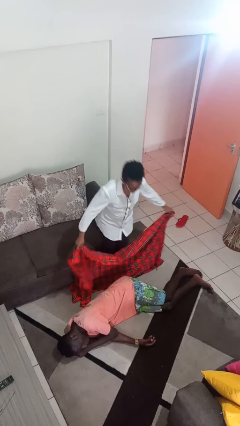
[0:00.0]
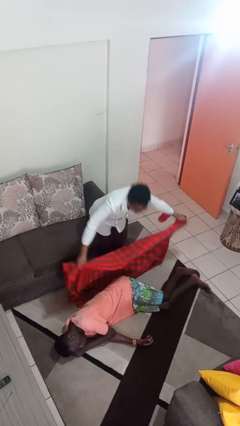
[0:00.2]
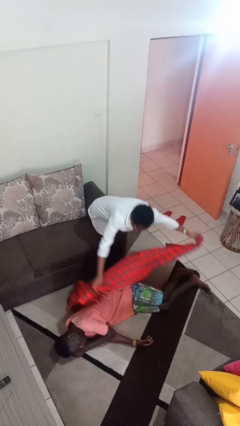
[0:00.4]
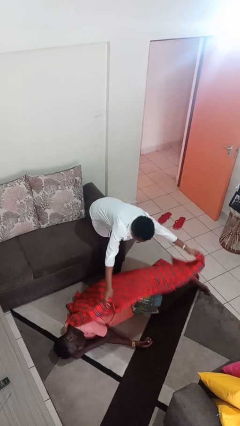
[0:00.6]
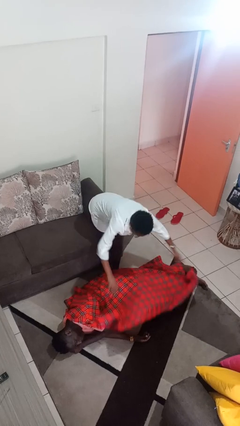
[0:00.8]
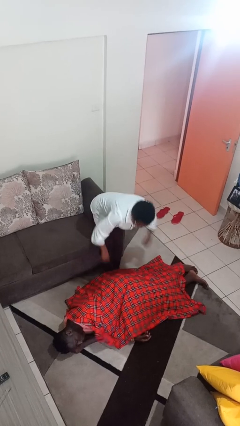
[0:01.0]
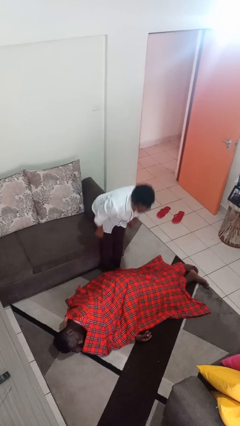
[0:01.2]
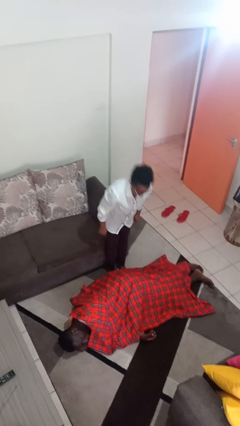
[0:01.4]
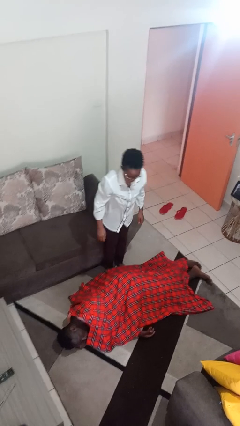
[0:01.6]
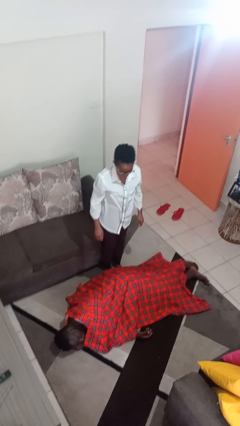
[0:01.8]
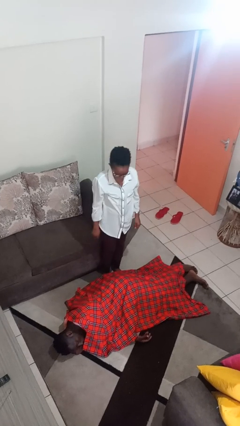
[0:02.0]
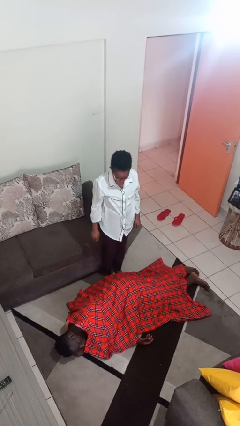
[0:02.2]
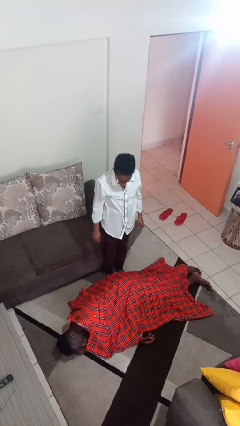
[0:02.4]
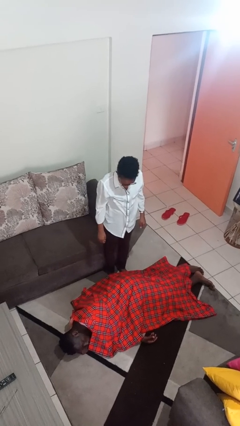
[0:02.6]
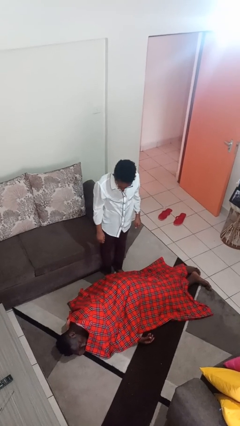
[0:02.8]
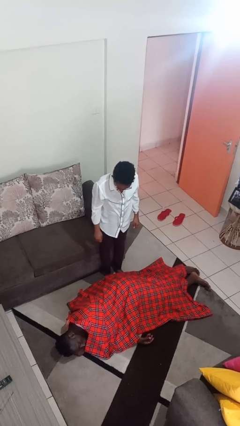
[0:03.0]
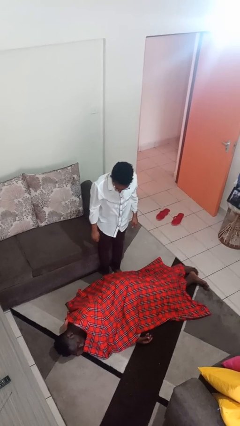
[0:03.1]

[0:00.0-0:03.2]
person covers friend with blanket

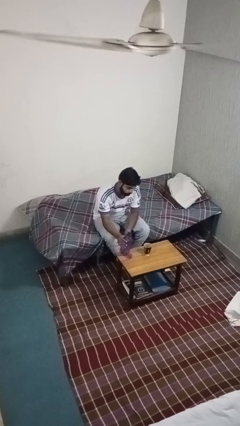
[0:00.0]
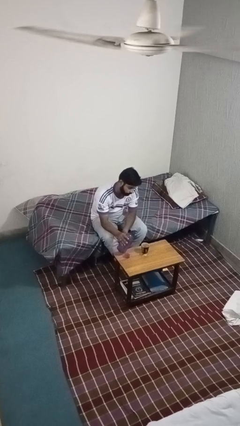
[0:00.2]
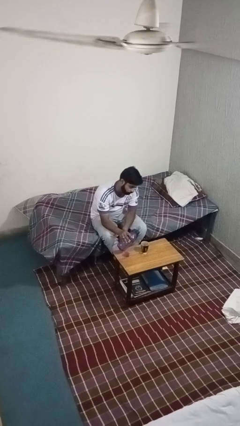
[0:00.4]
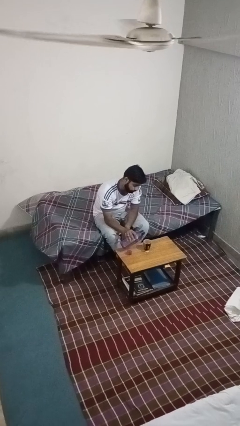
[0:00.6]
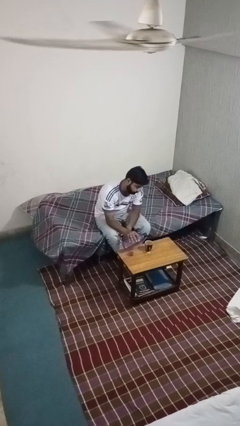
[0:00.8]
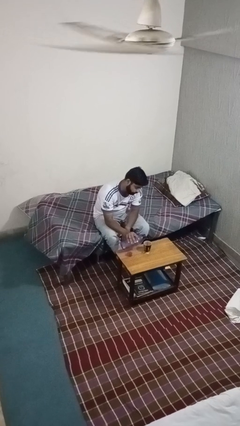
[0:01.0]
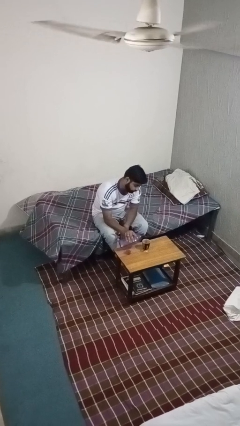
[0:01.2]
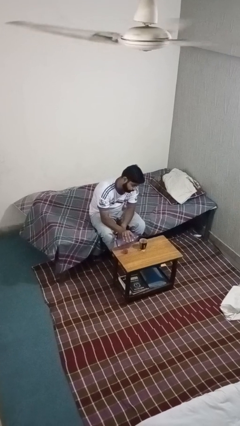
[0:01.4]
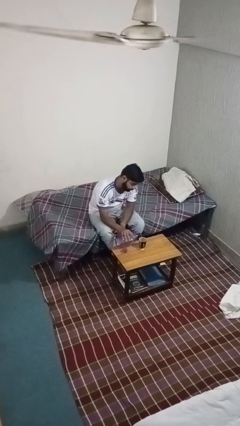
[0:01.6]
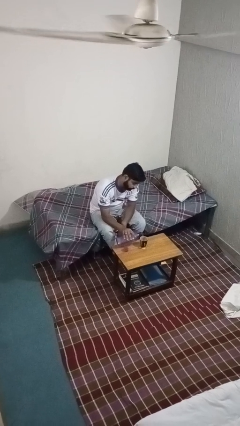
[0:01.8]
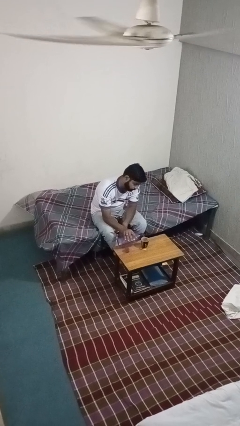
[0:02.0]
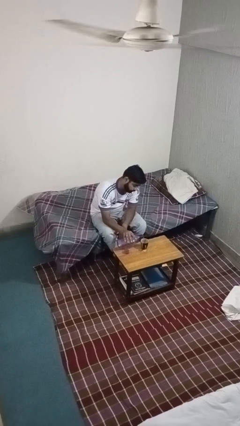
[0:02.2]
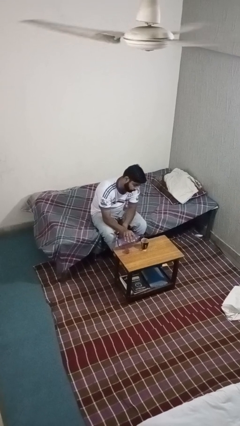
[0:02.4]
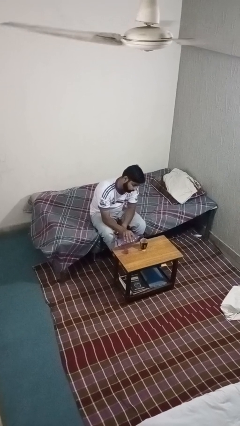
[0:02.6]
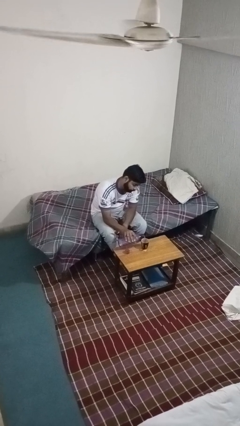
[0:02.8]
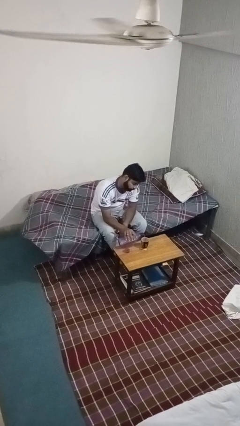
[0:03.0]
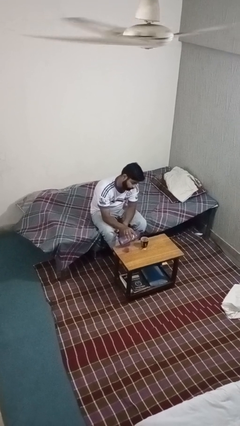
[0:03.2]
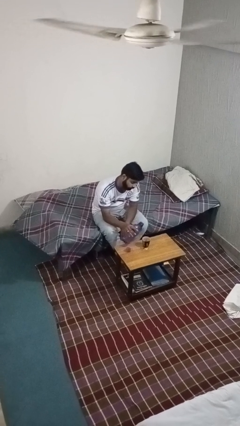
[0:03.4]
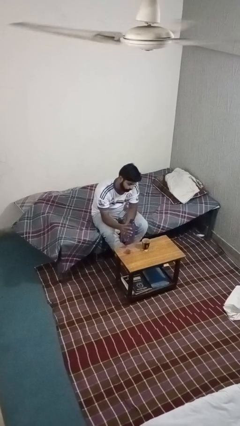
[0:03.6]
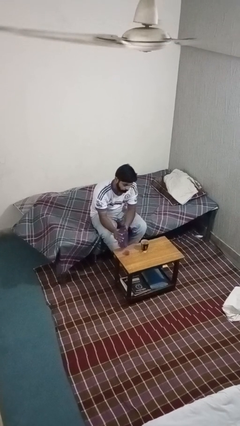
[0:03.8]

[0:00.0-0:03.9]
person pours liquid into cup

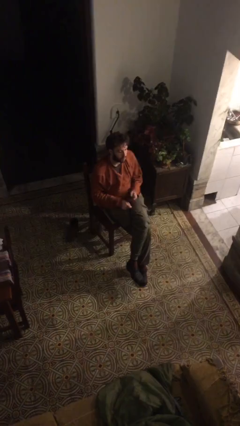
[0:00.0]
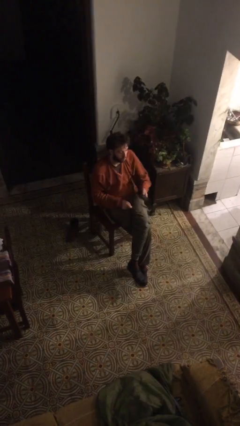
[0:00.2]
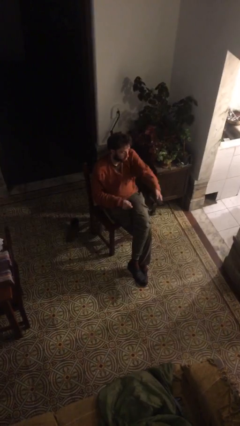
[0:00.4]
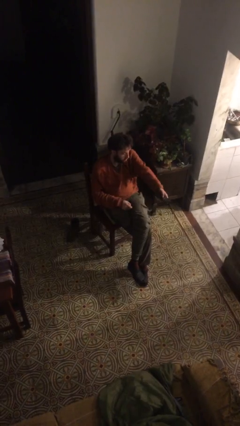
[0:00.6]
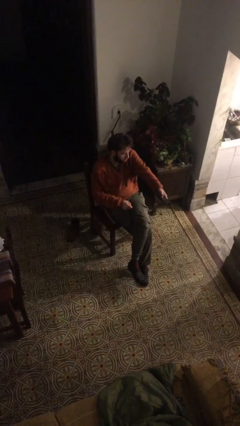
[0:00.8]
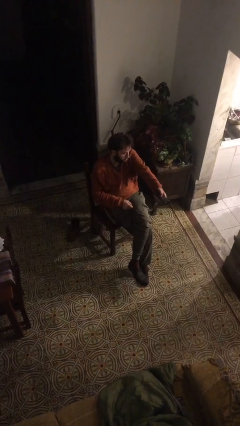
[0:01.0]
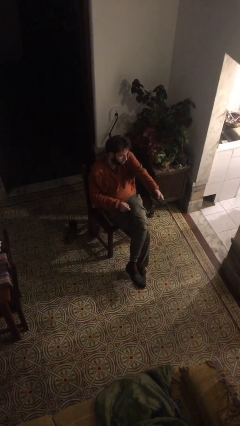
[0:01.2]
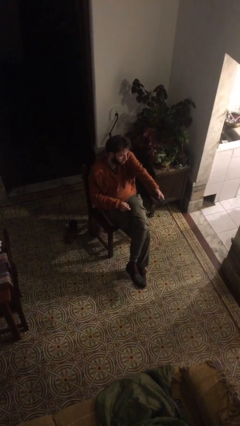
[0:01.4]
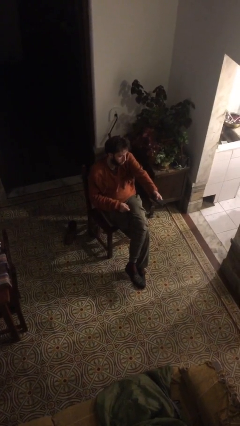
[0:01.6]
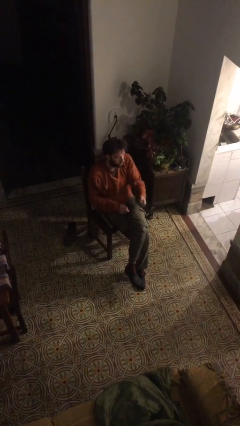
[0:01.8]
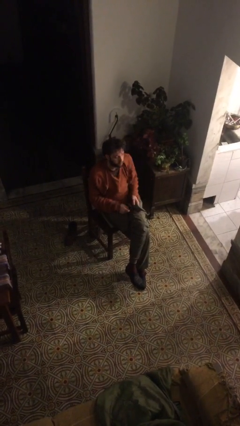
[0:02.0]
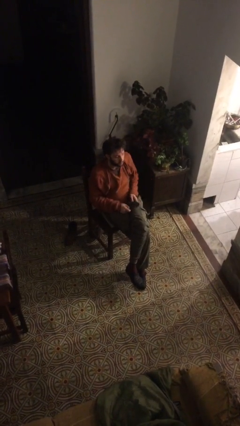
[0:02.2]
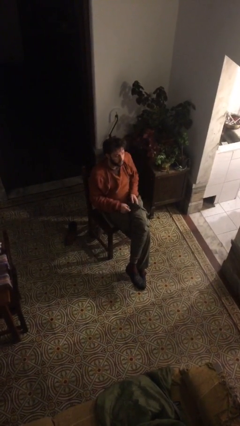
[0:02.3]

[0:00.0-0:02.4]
person uses television remote

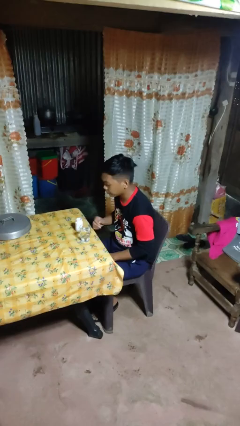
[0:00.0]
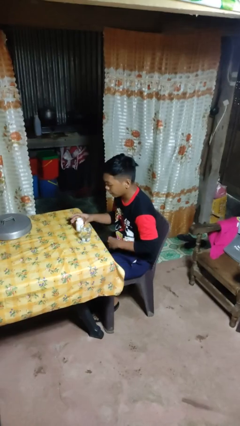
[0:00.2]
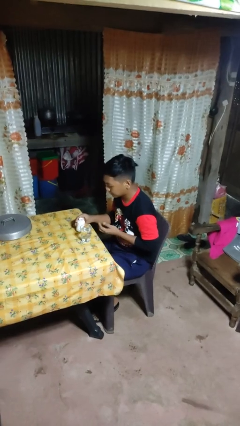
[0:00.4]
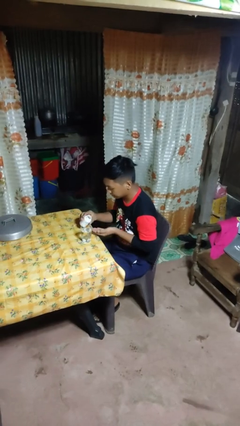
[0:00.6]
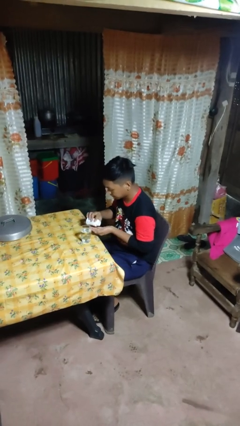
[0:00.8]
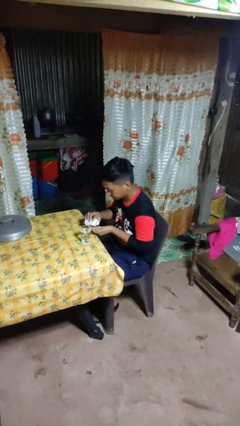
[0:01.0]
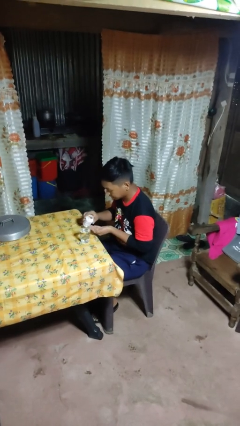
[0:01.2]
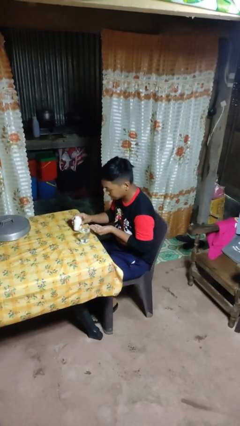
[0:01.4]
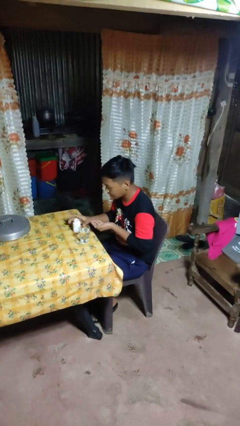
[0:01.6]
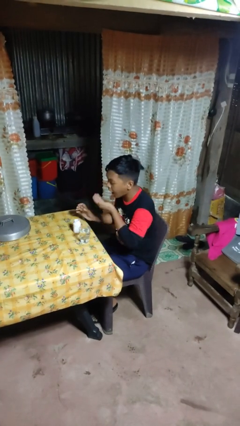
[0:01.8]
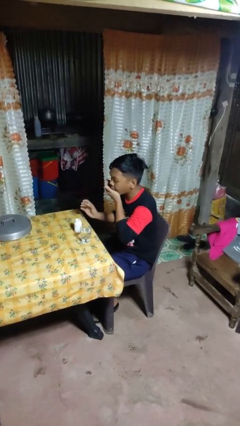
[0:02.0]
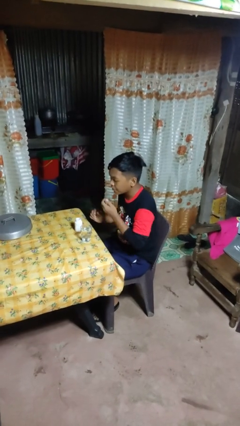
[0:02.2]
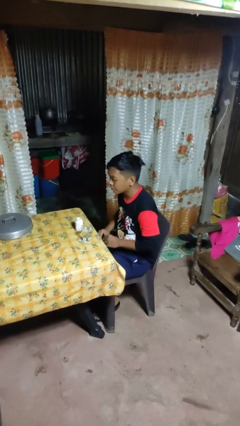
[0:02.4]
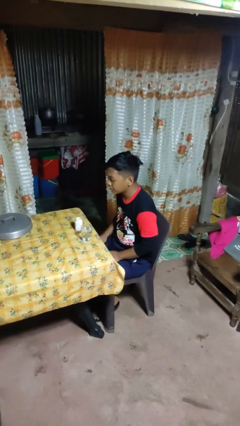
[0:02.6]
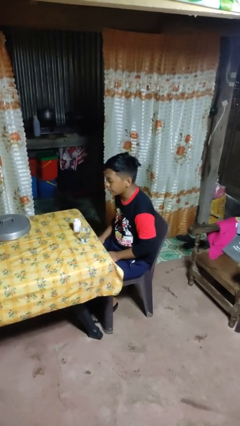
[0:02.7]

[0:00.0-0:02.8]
person takes medicine pills

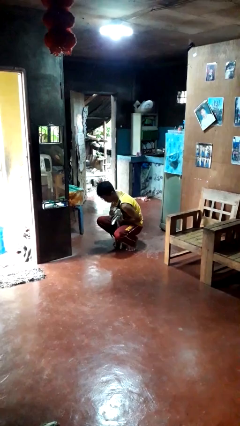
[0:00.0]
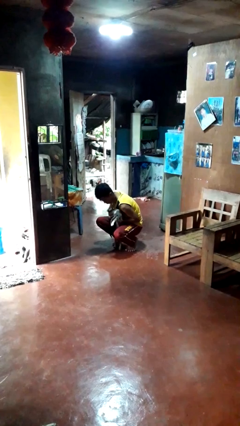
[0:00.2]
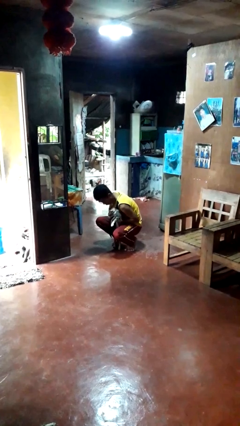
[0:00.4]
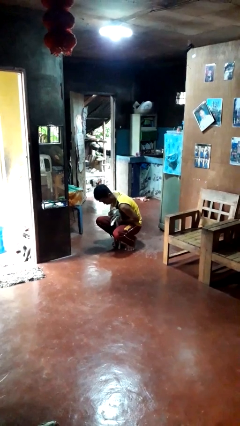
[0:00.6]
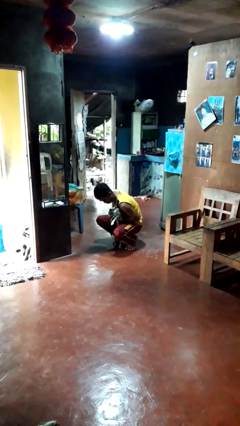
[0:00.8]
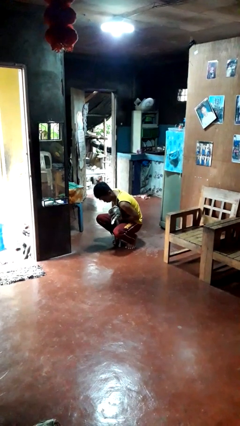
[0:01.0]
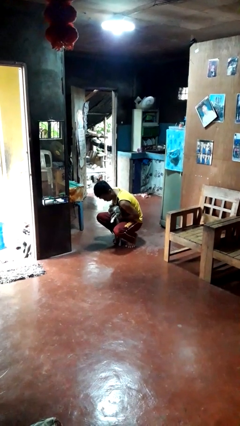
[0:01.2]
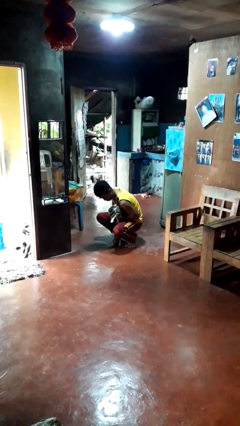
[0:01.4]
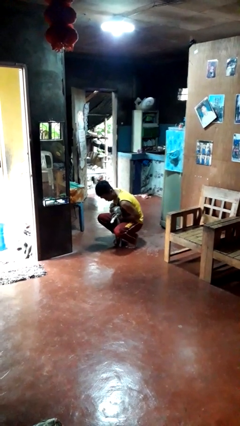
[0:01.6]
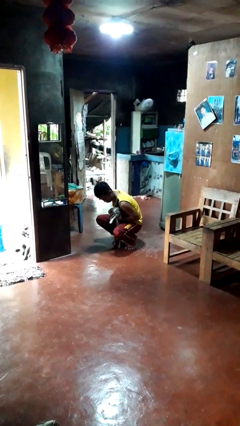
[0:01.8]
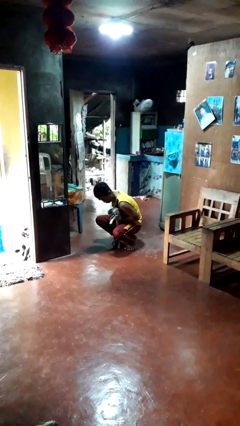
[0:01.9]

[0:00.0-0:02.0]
person hugs cat

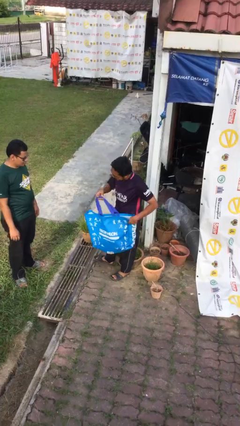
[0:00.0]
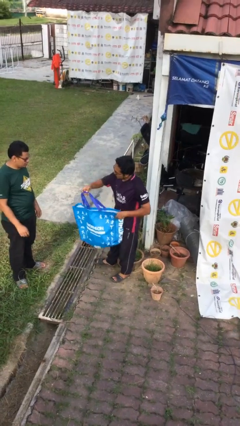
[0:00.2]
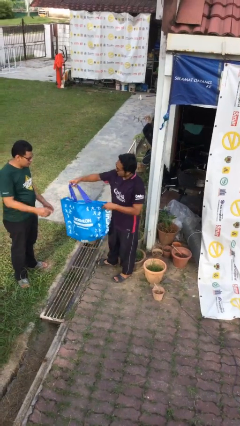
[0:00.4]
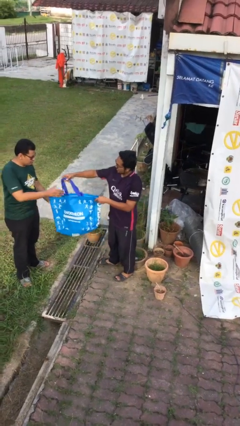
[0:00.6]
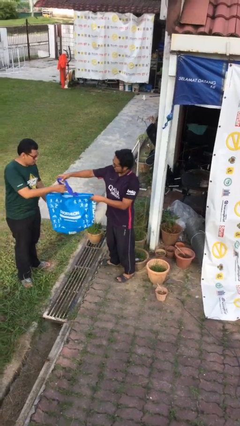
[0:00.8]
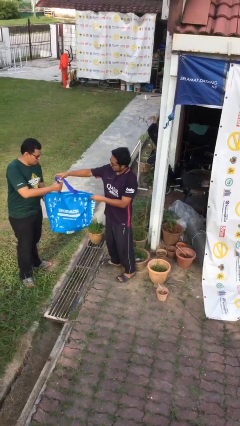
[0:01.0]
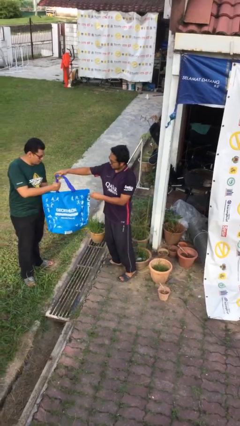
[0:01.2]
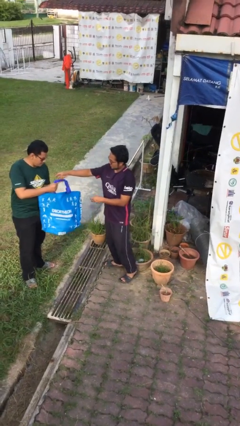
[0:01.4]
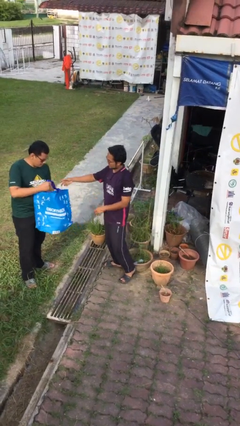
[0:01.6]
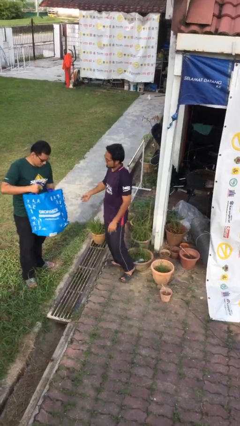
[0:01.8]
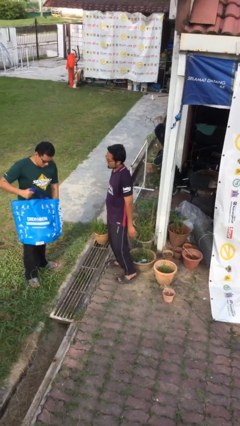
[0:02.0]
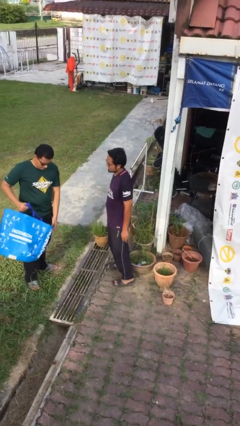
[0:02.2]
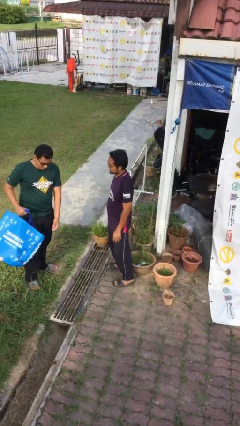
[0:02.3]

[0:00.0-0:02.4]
person transfers object to person

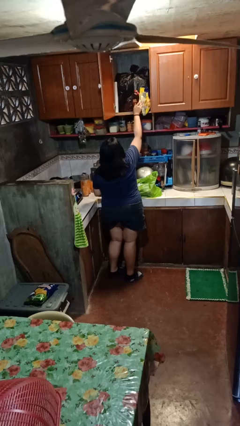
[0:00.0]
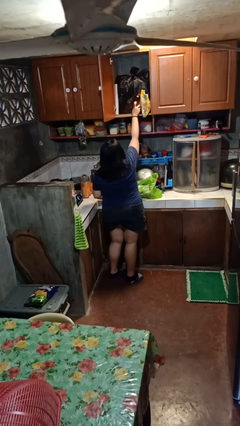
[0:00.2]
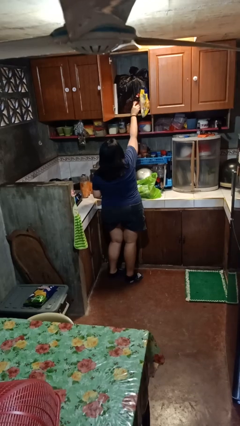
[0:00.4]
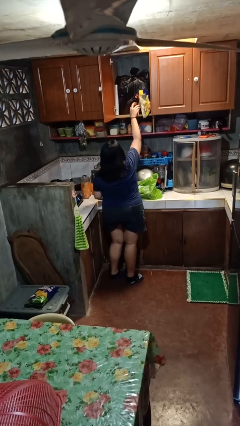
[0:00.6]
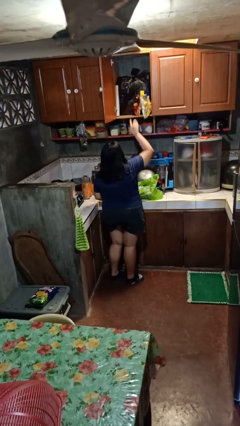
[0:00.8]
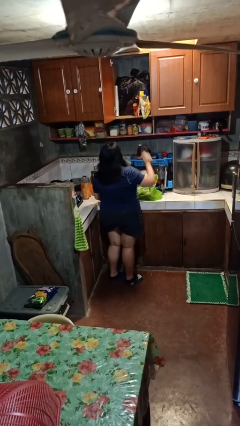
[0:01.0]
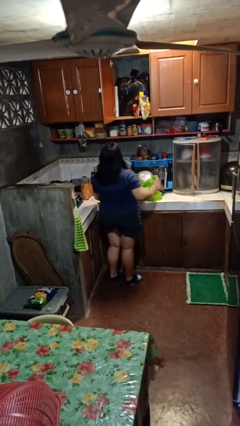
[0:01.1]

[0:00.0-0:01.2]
person loads groceries into cabinet
